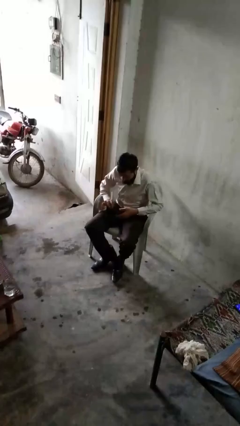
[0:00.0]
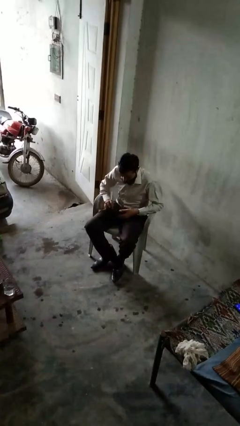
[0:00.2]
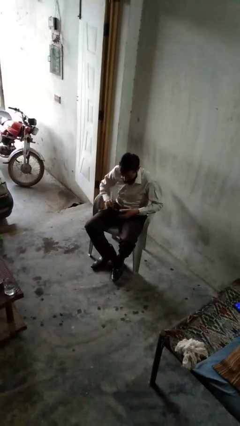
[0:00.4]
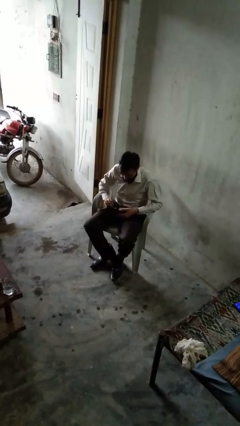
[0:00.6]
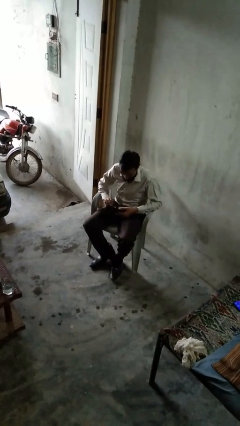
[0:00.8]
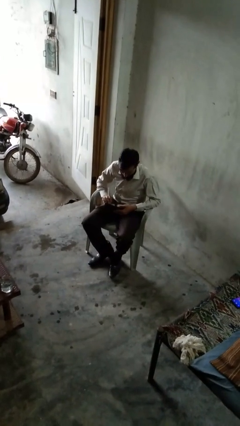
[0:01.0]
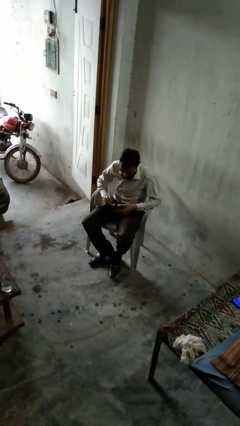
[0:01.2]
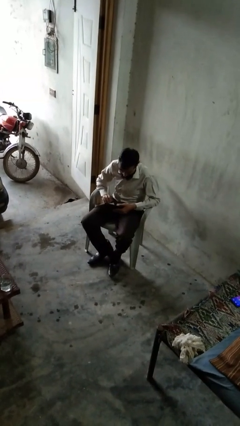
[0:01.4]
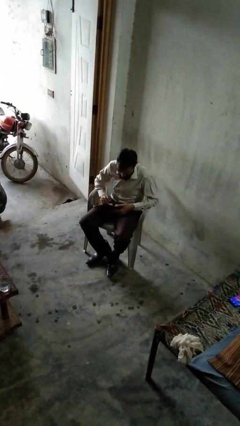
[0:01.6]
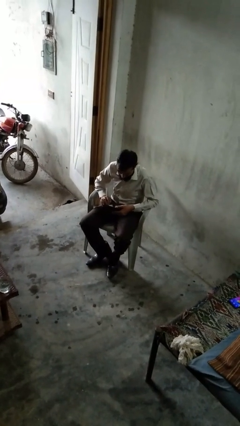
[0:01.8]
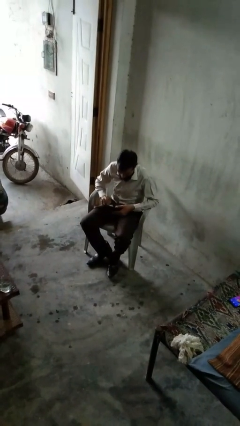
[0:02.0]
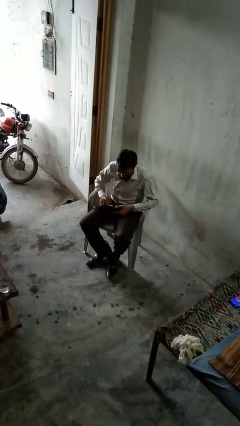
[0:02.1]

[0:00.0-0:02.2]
person searches in purse

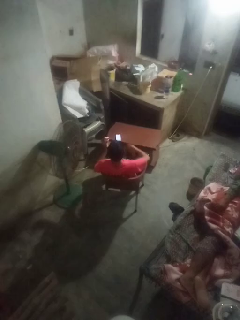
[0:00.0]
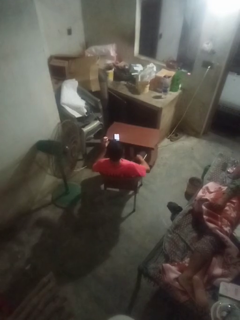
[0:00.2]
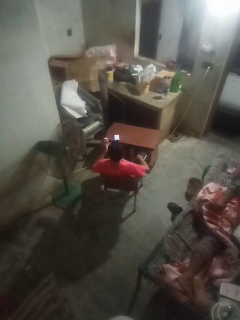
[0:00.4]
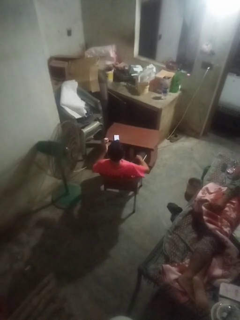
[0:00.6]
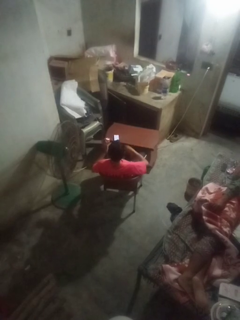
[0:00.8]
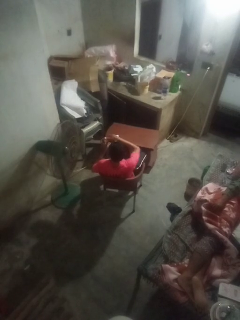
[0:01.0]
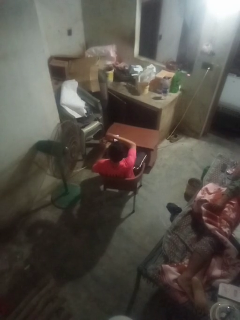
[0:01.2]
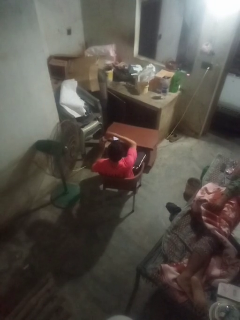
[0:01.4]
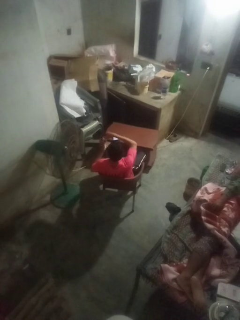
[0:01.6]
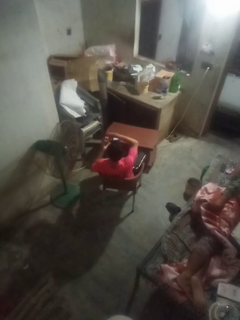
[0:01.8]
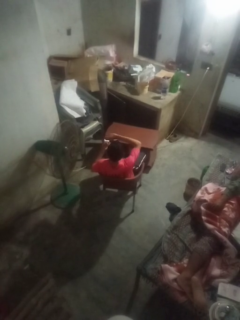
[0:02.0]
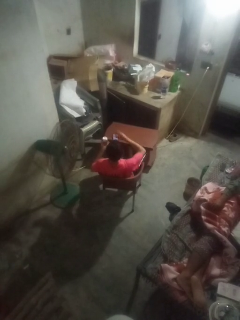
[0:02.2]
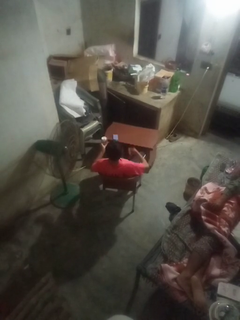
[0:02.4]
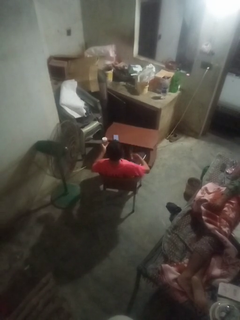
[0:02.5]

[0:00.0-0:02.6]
person opens jar

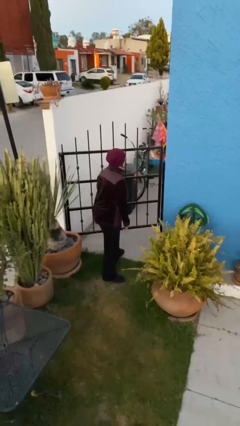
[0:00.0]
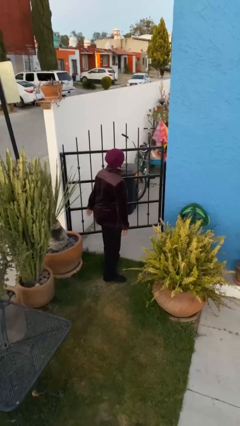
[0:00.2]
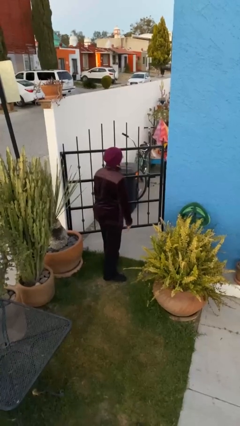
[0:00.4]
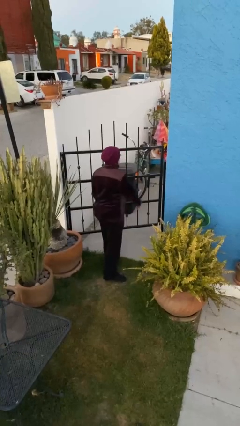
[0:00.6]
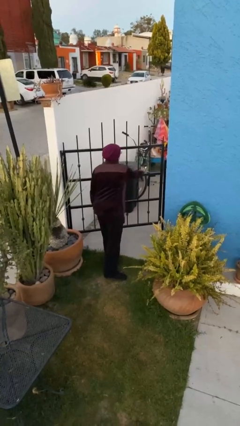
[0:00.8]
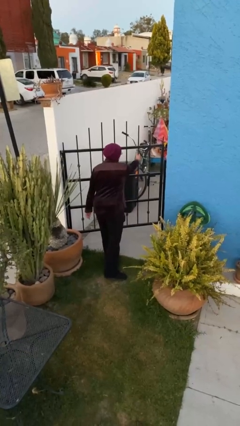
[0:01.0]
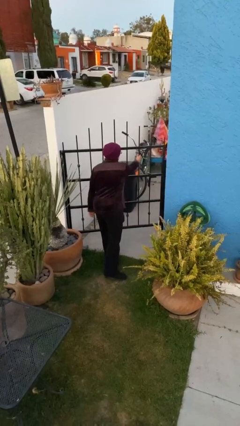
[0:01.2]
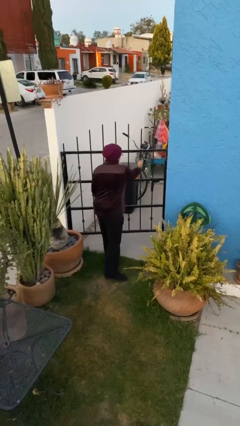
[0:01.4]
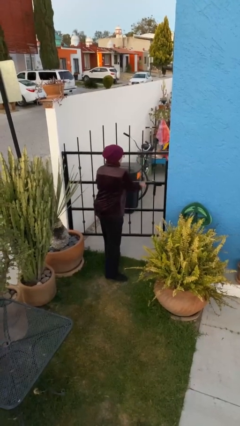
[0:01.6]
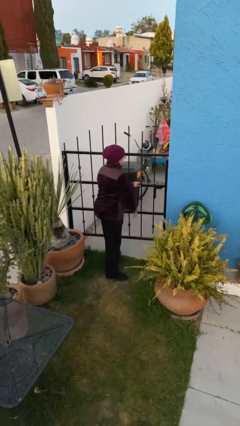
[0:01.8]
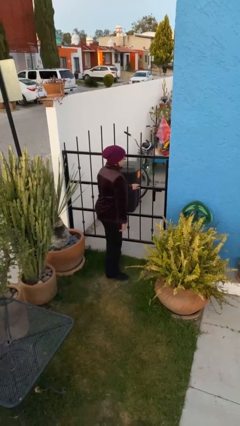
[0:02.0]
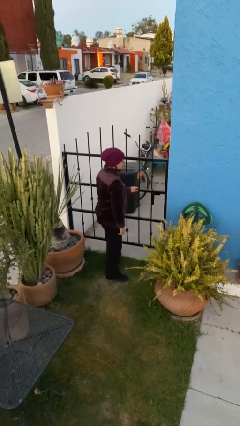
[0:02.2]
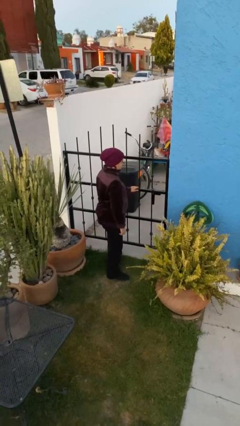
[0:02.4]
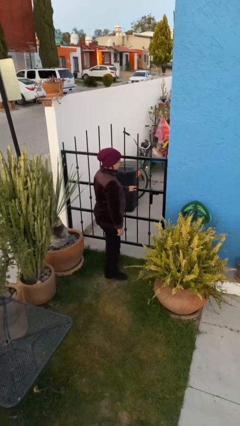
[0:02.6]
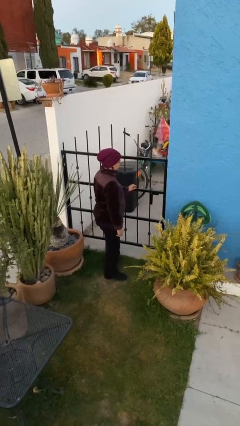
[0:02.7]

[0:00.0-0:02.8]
person closes facility door

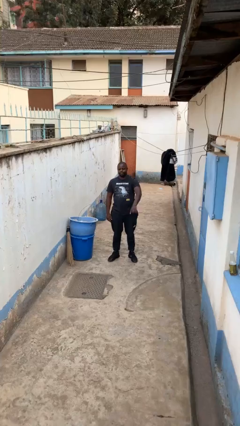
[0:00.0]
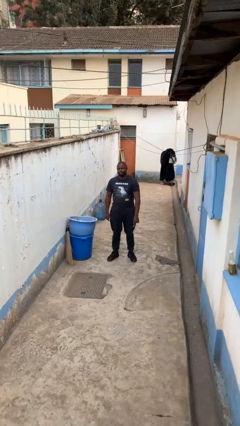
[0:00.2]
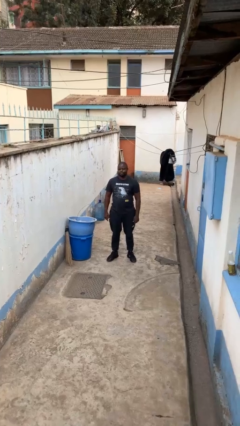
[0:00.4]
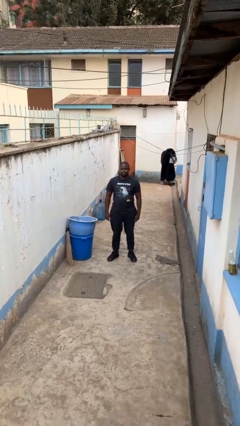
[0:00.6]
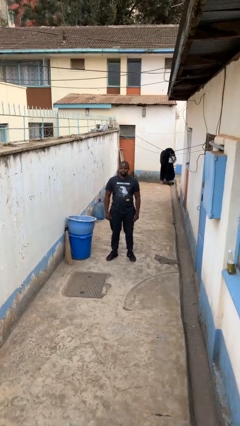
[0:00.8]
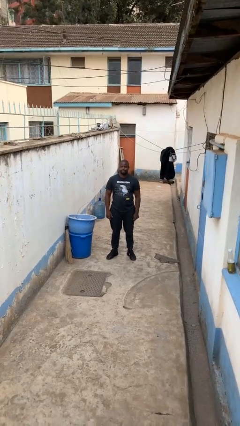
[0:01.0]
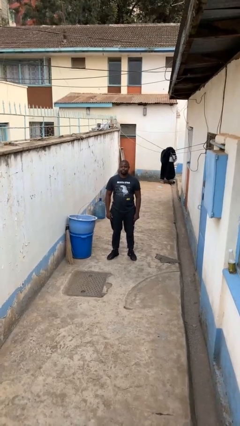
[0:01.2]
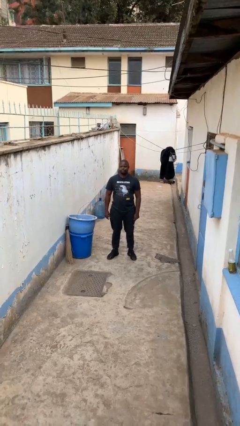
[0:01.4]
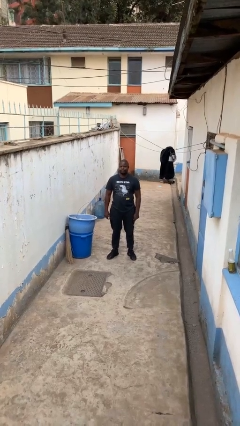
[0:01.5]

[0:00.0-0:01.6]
person gestures swipe down

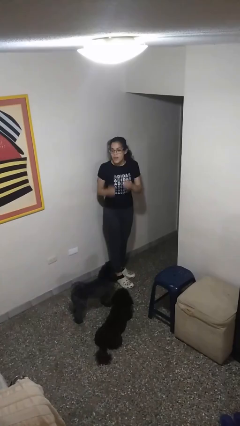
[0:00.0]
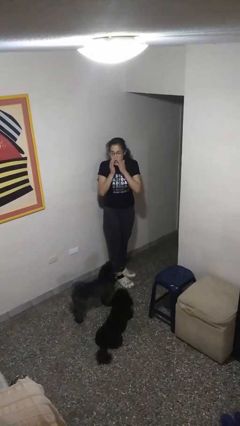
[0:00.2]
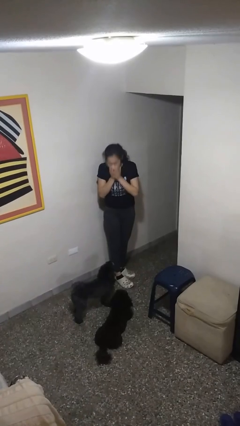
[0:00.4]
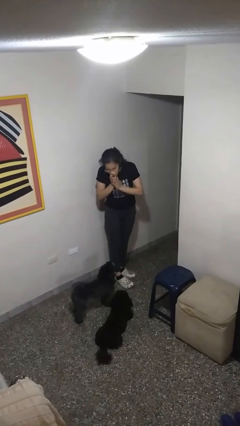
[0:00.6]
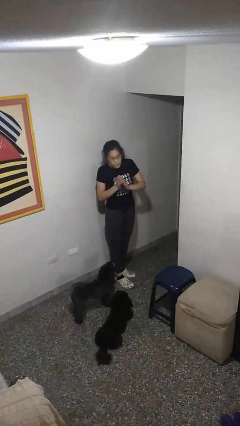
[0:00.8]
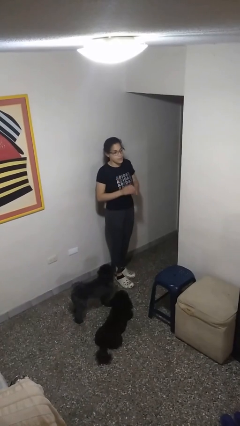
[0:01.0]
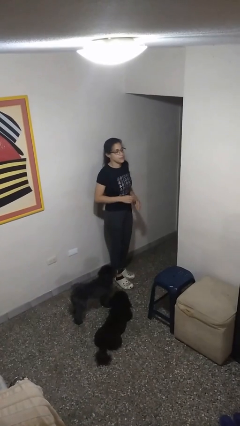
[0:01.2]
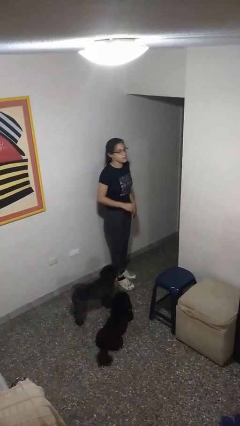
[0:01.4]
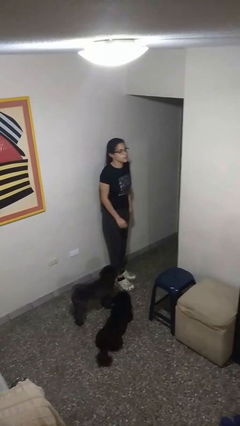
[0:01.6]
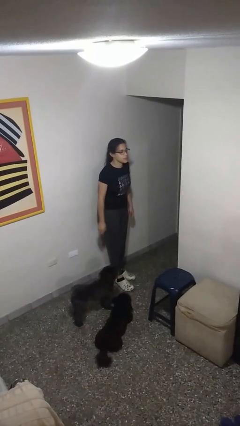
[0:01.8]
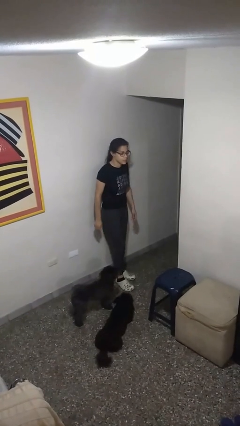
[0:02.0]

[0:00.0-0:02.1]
person sneezes into hand

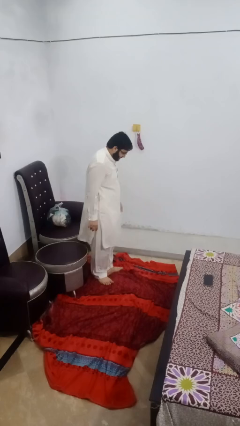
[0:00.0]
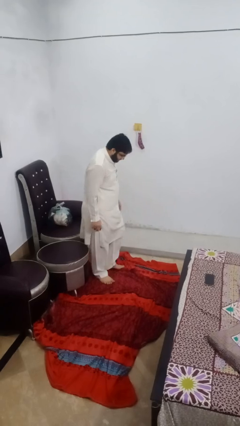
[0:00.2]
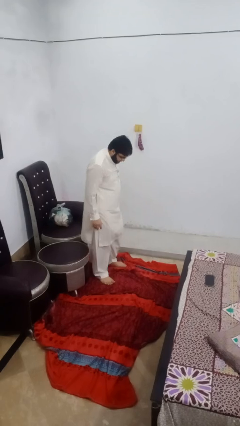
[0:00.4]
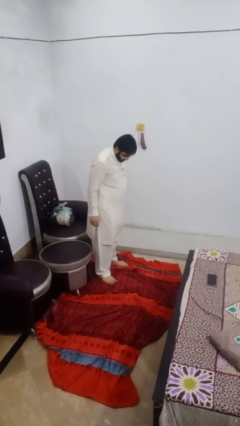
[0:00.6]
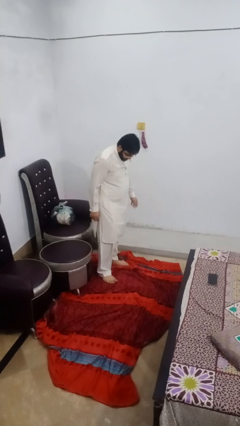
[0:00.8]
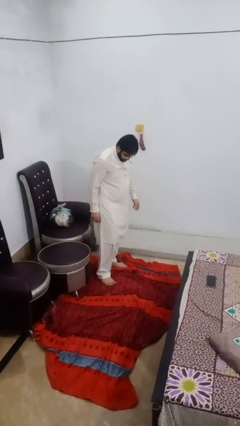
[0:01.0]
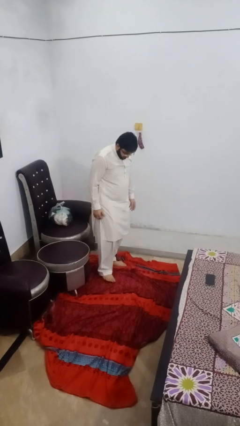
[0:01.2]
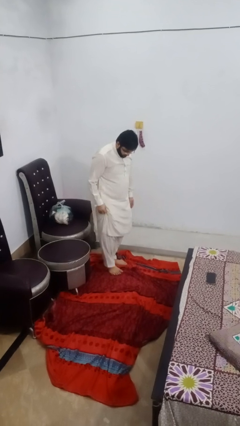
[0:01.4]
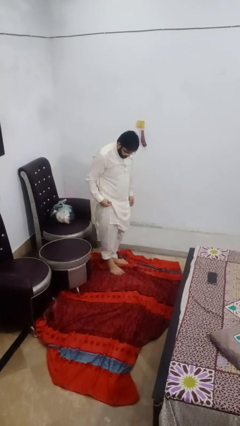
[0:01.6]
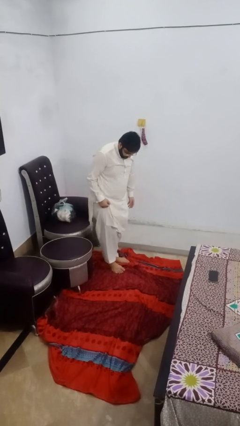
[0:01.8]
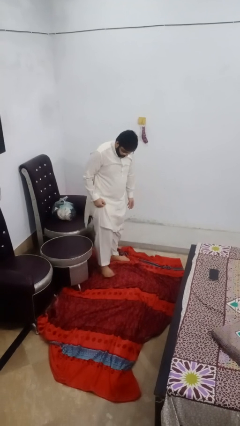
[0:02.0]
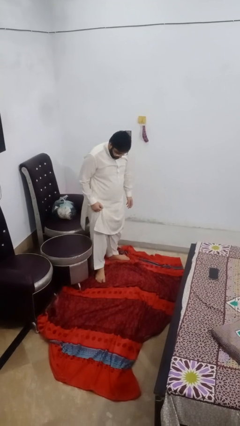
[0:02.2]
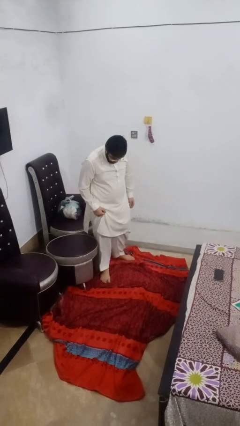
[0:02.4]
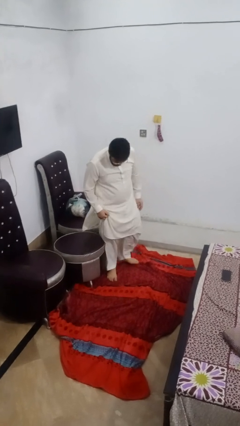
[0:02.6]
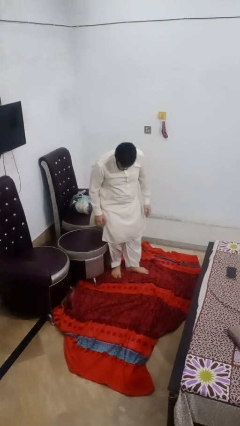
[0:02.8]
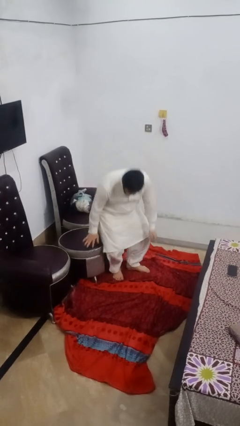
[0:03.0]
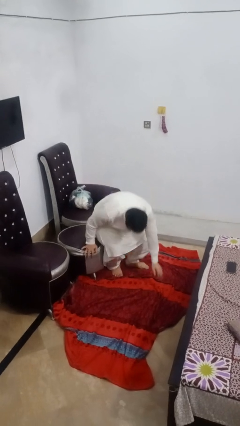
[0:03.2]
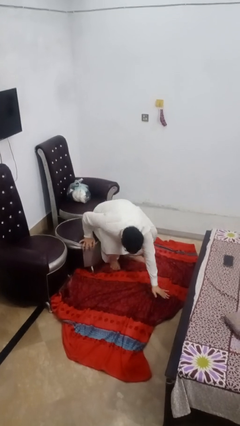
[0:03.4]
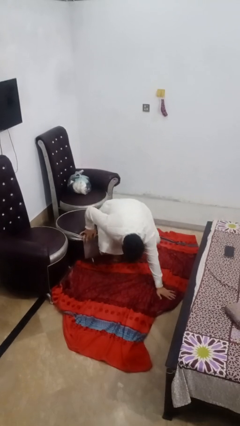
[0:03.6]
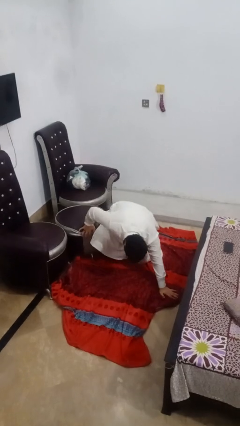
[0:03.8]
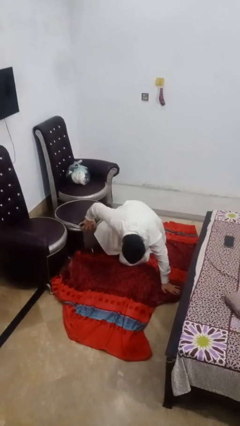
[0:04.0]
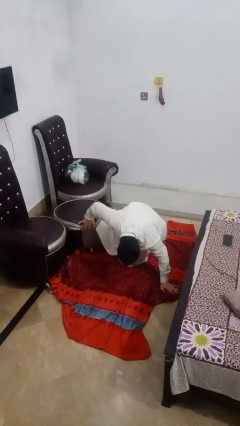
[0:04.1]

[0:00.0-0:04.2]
person trips on object on floor

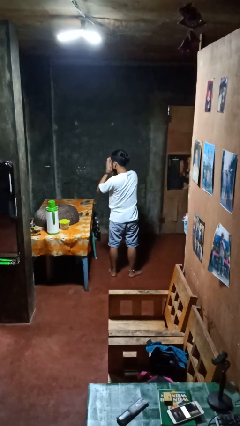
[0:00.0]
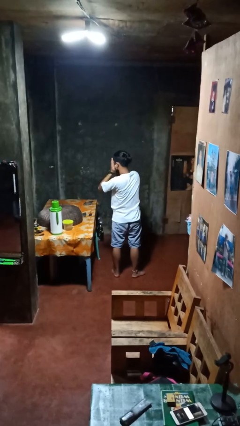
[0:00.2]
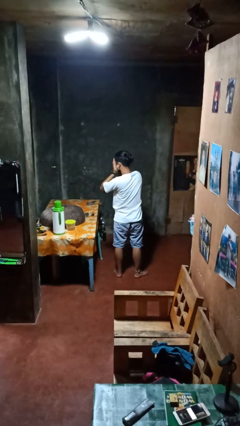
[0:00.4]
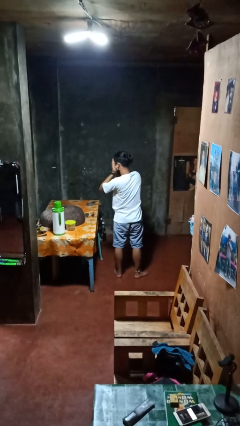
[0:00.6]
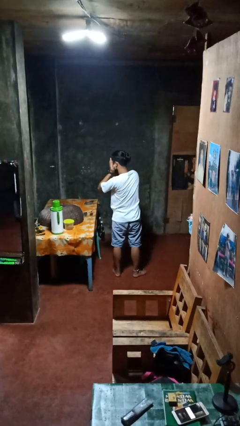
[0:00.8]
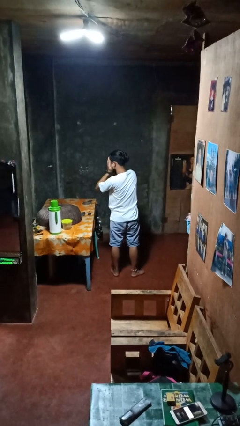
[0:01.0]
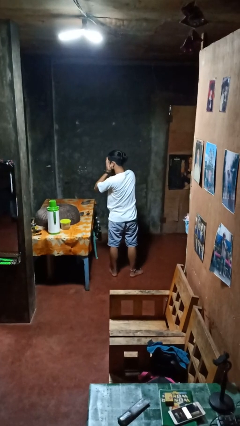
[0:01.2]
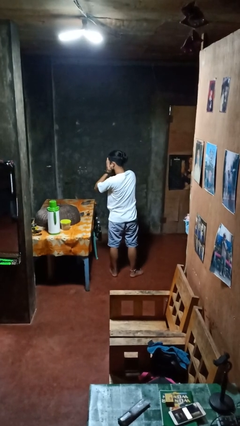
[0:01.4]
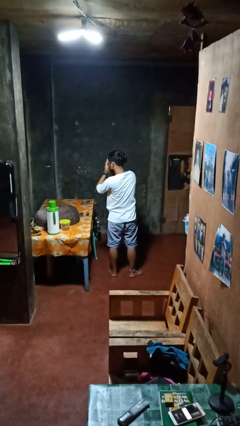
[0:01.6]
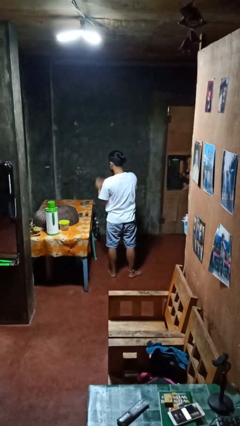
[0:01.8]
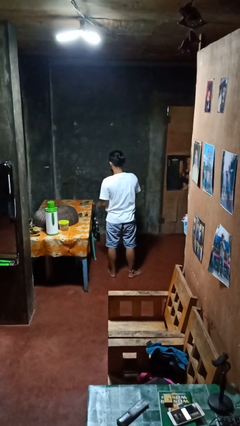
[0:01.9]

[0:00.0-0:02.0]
person covers face with hands

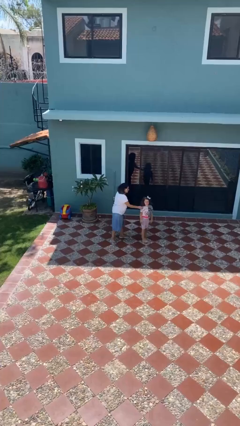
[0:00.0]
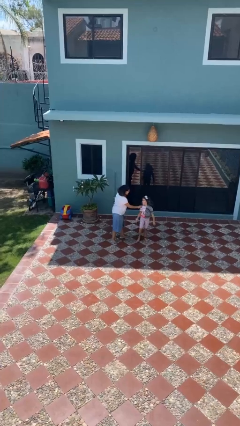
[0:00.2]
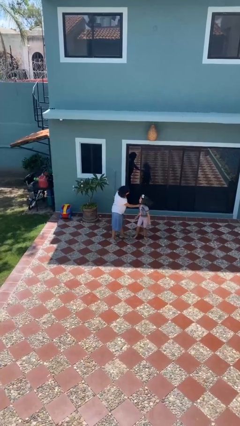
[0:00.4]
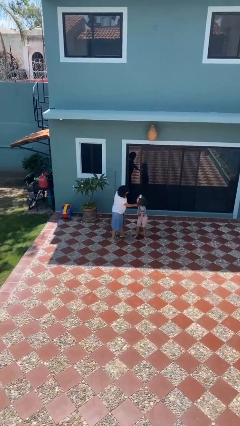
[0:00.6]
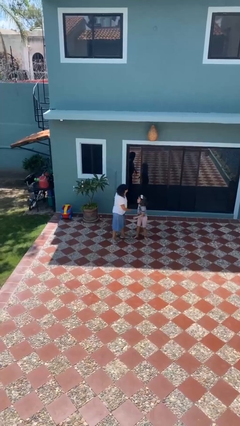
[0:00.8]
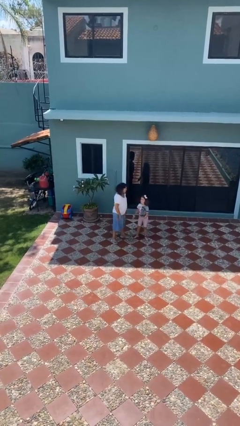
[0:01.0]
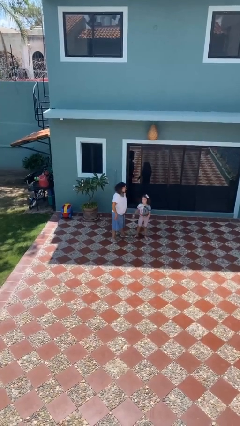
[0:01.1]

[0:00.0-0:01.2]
person spins person around
